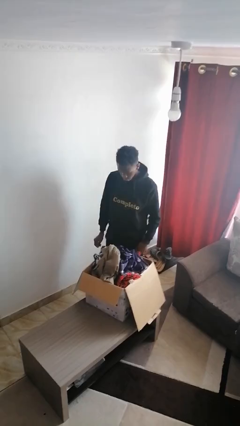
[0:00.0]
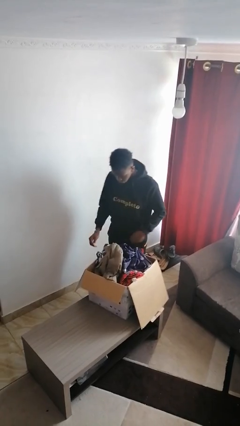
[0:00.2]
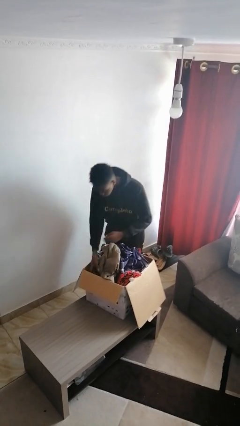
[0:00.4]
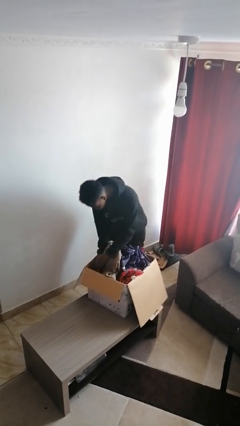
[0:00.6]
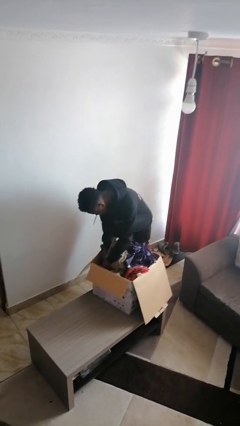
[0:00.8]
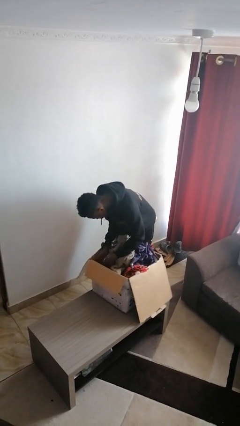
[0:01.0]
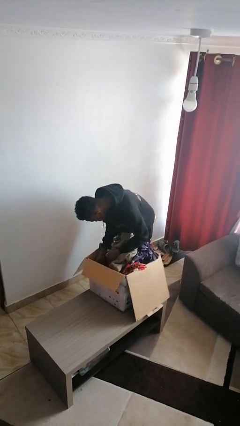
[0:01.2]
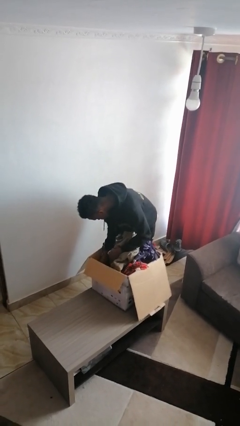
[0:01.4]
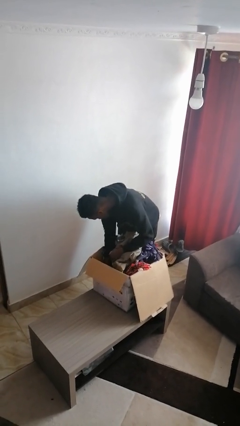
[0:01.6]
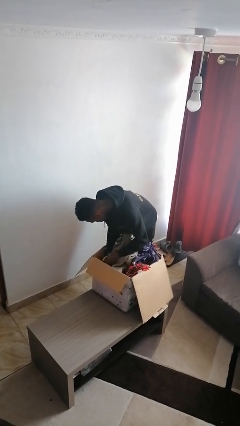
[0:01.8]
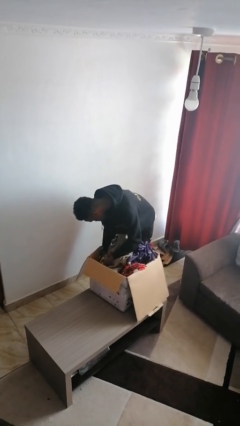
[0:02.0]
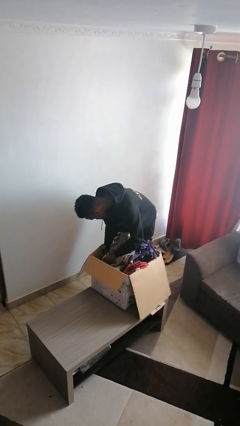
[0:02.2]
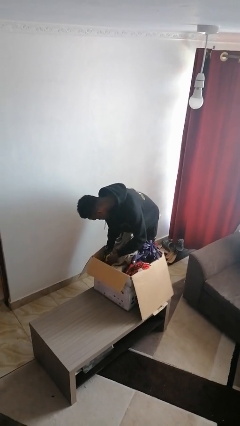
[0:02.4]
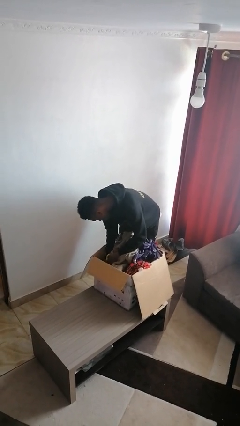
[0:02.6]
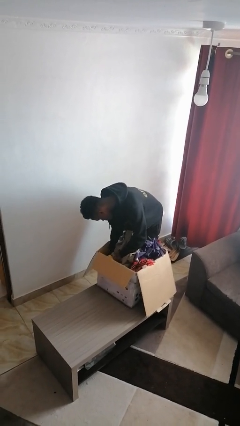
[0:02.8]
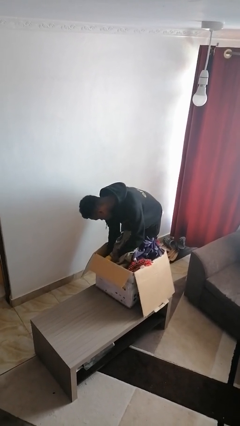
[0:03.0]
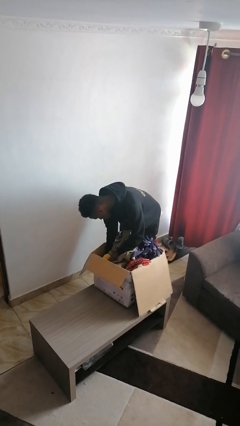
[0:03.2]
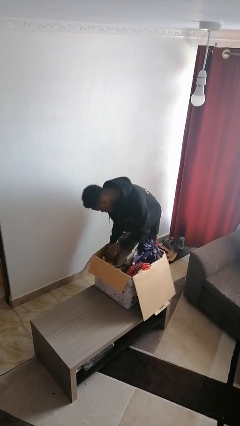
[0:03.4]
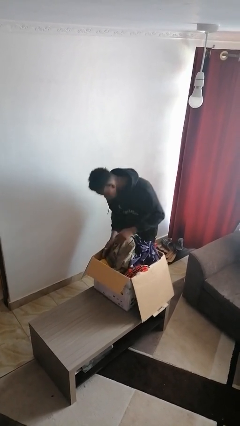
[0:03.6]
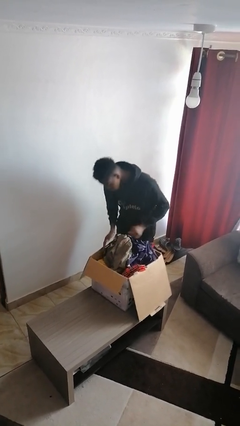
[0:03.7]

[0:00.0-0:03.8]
person searches in box

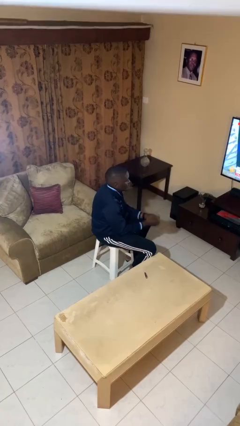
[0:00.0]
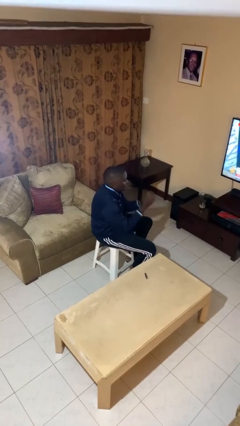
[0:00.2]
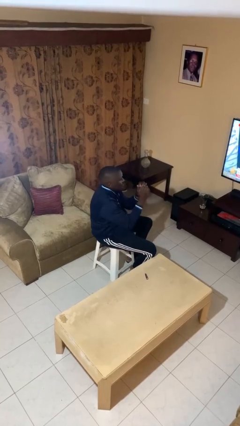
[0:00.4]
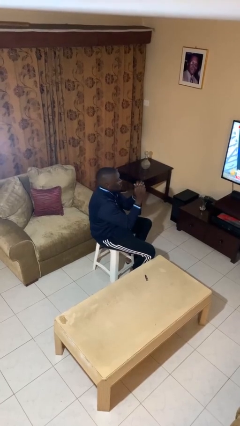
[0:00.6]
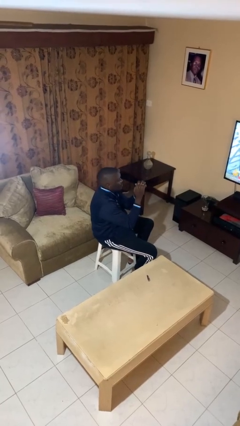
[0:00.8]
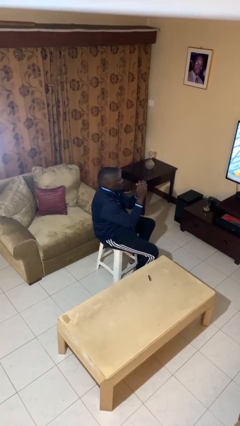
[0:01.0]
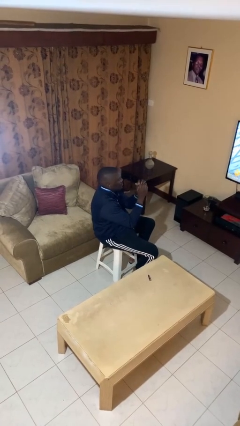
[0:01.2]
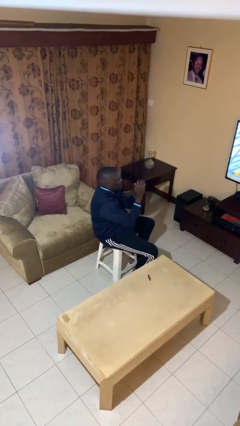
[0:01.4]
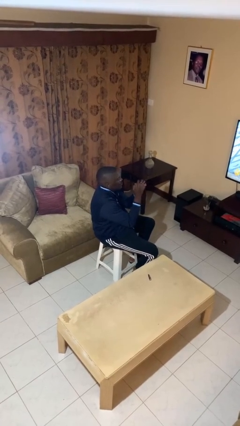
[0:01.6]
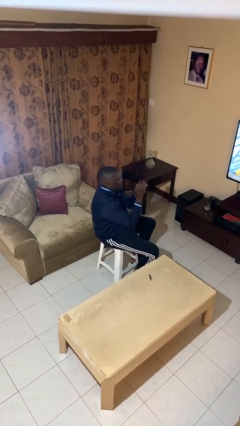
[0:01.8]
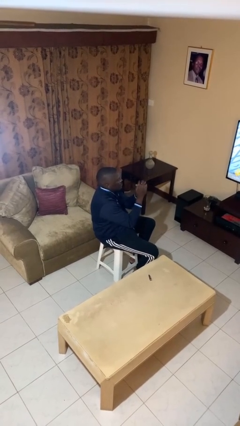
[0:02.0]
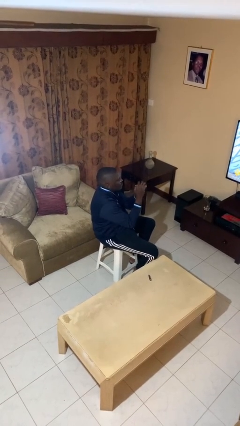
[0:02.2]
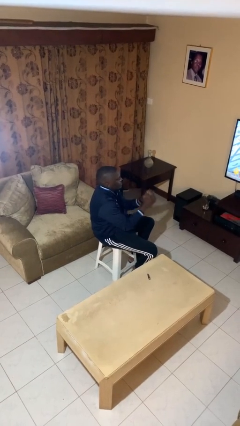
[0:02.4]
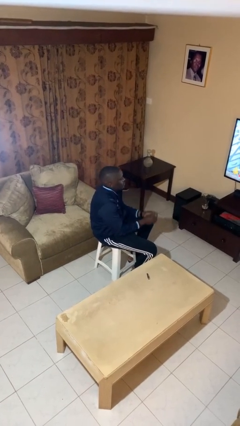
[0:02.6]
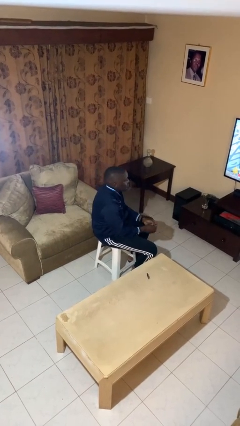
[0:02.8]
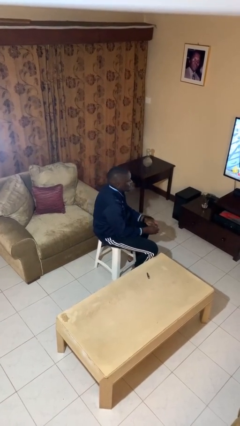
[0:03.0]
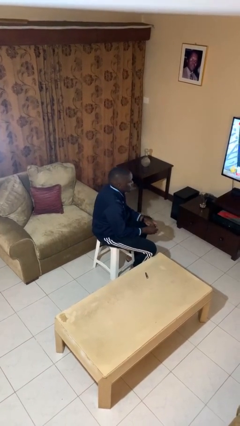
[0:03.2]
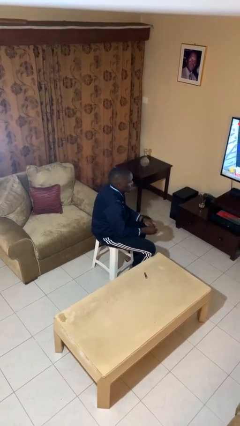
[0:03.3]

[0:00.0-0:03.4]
person files fingernails

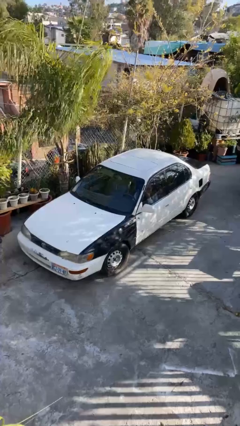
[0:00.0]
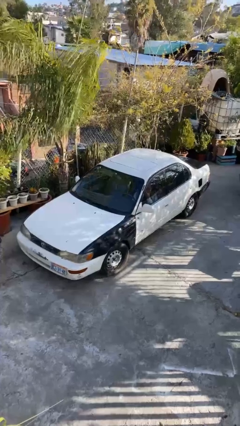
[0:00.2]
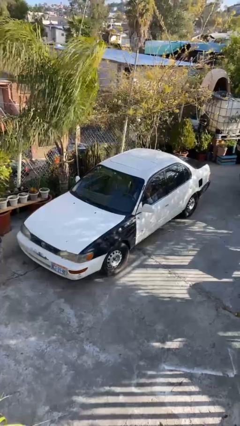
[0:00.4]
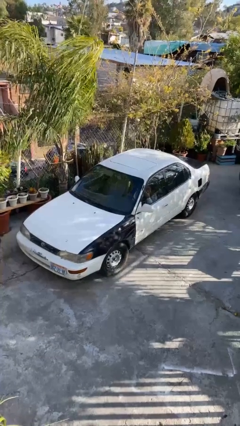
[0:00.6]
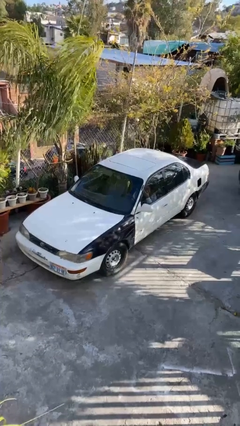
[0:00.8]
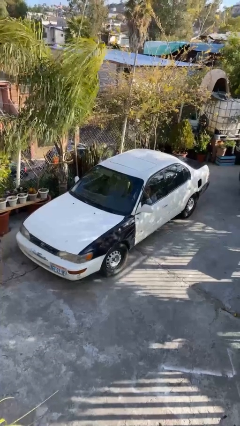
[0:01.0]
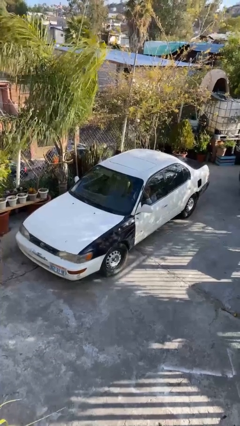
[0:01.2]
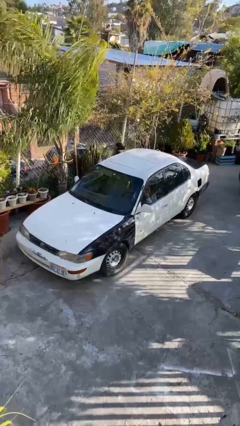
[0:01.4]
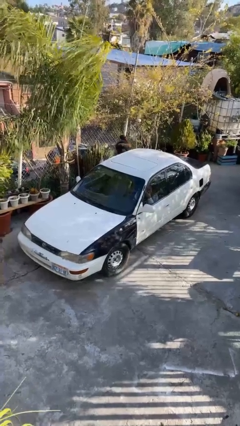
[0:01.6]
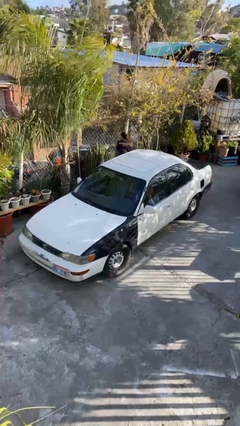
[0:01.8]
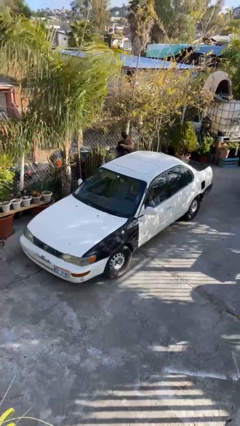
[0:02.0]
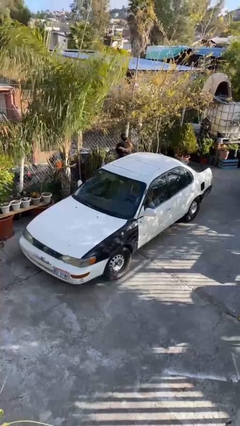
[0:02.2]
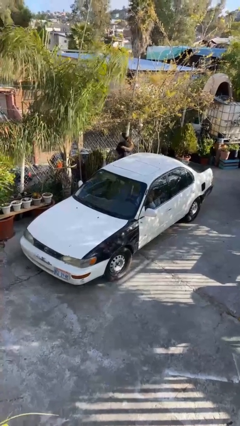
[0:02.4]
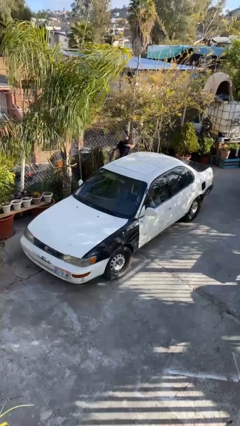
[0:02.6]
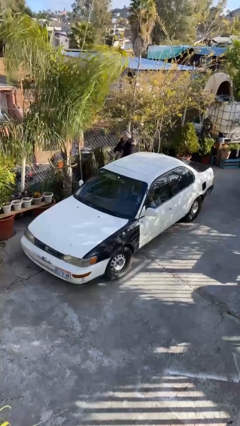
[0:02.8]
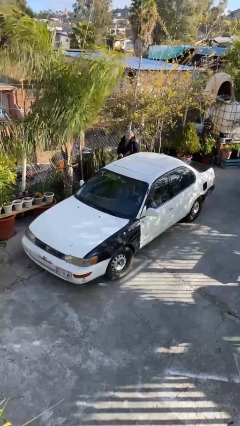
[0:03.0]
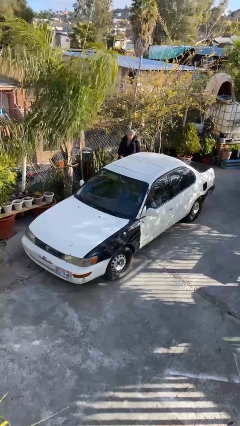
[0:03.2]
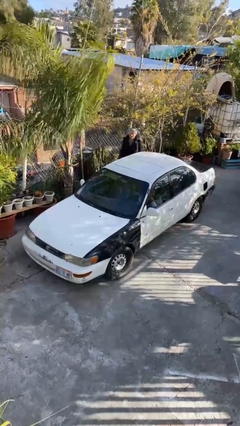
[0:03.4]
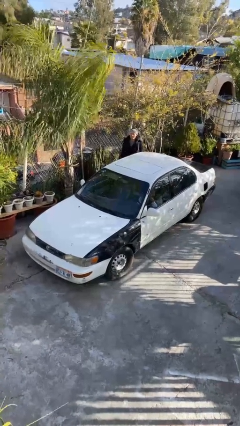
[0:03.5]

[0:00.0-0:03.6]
car drops off person

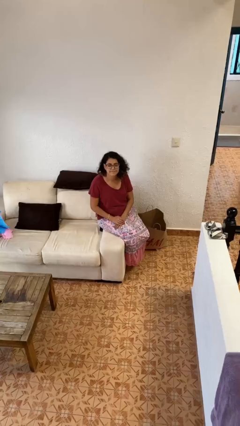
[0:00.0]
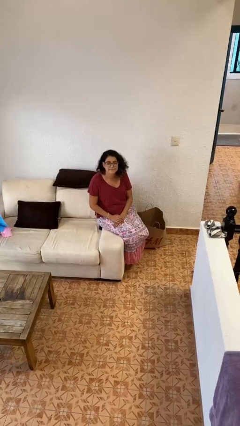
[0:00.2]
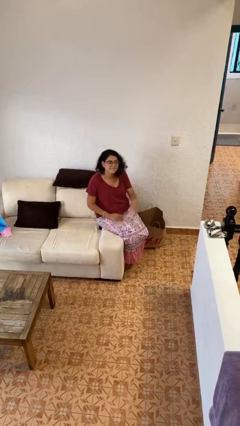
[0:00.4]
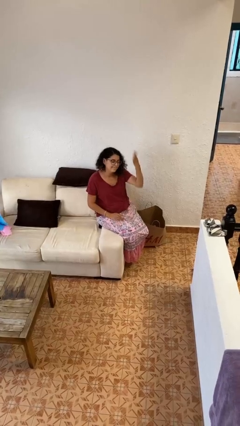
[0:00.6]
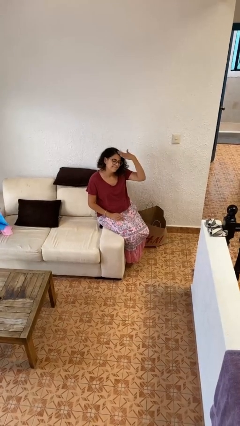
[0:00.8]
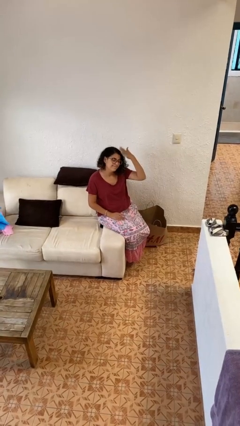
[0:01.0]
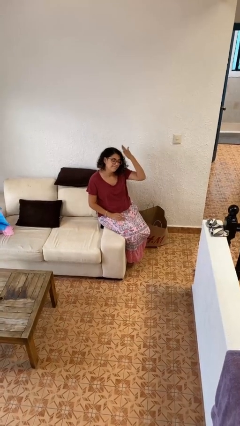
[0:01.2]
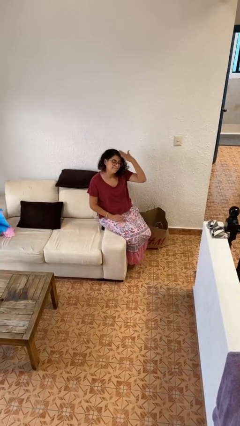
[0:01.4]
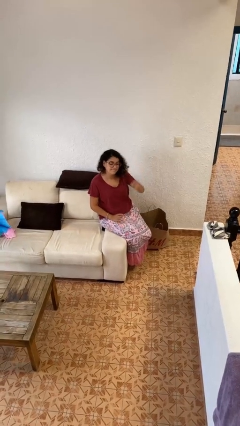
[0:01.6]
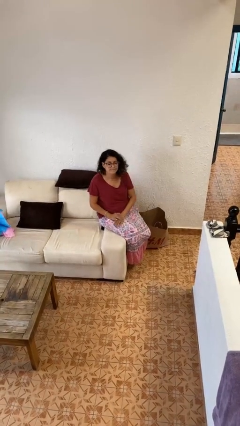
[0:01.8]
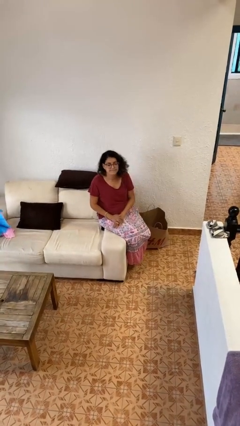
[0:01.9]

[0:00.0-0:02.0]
person pats head

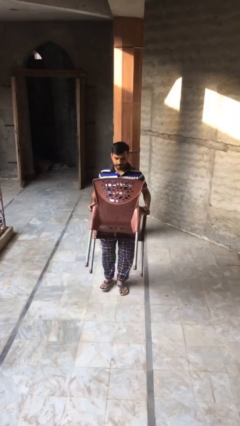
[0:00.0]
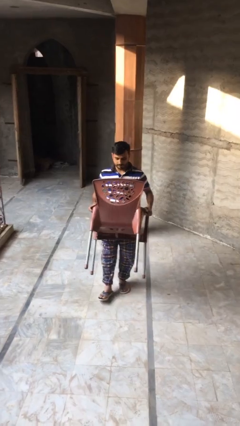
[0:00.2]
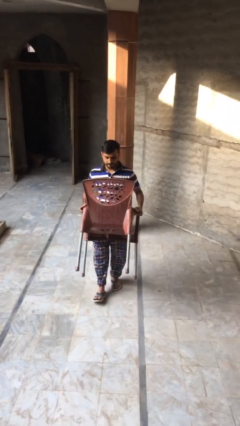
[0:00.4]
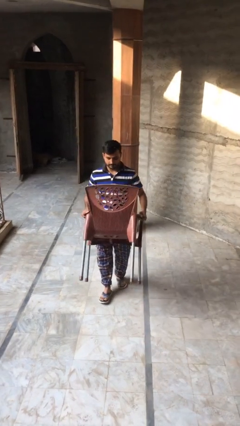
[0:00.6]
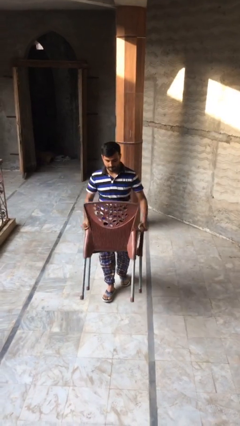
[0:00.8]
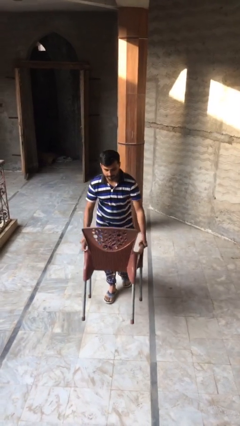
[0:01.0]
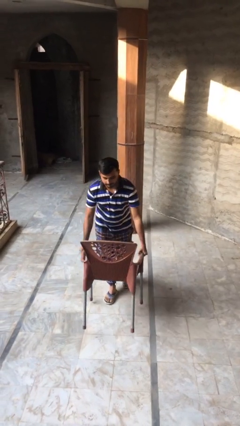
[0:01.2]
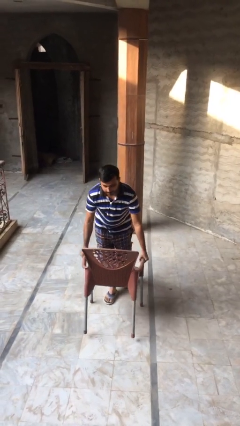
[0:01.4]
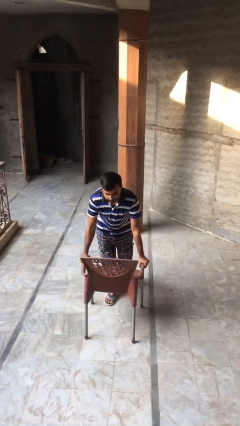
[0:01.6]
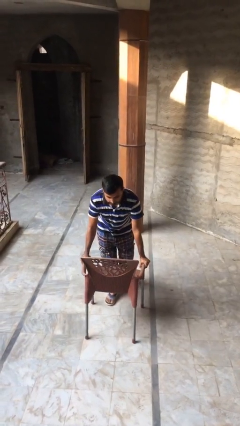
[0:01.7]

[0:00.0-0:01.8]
person puts down object on floor

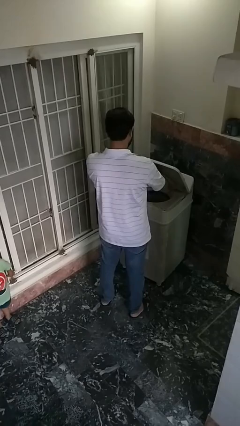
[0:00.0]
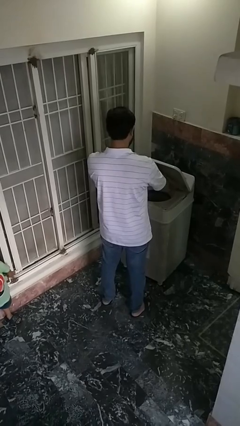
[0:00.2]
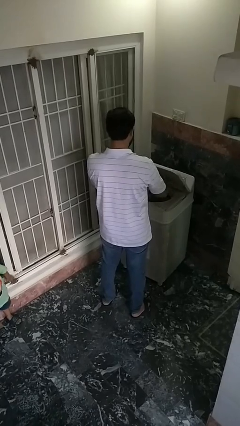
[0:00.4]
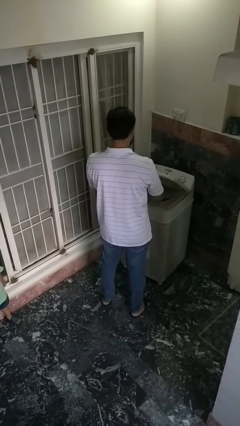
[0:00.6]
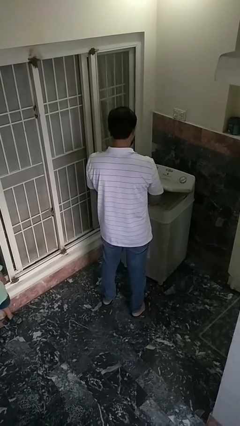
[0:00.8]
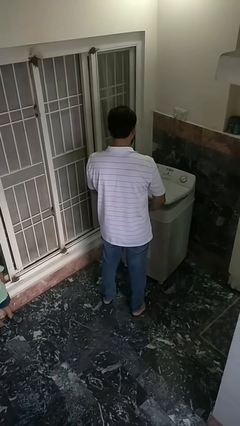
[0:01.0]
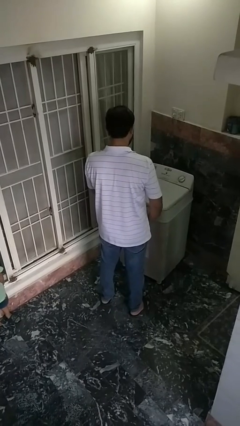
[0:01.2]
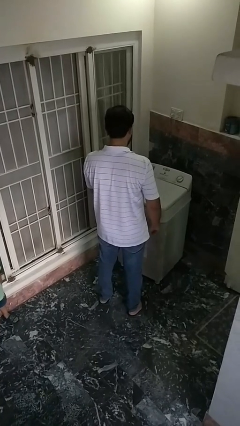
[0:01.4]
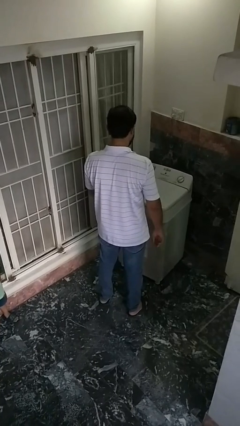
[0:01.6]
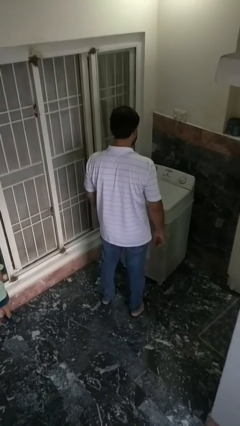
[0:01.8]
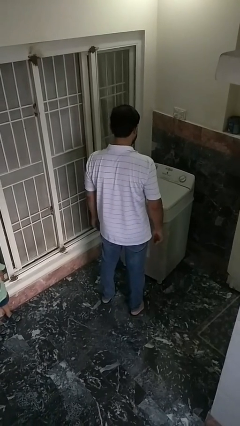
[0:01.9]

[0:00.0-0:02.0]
person closes clothes washer

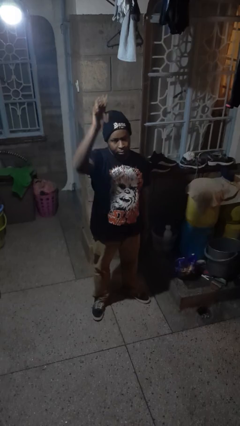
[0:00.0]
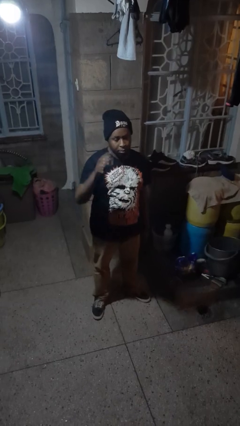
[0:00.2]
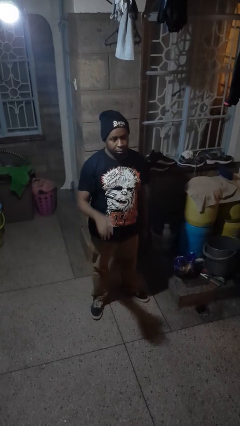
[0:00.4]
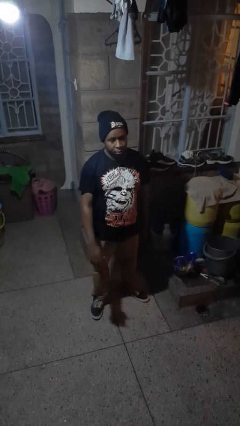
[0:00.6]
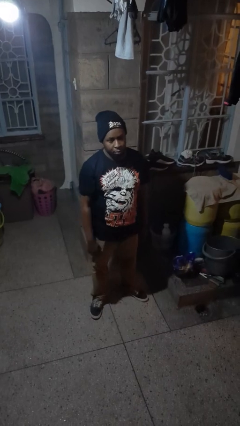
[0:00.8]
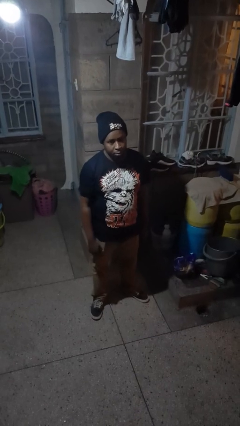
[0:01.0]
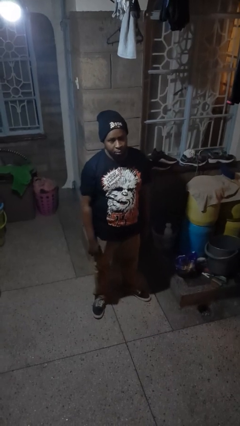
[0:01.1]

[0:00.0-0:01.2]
person gestures lower hand
